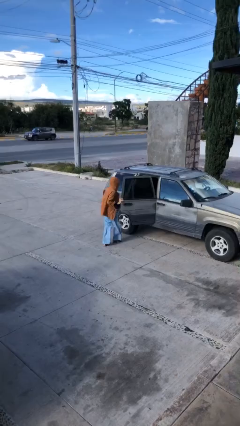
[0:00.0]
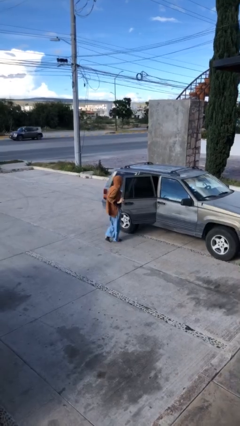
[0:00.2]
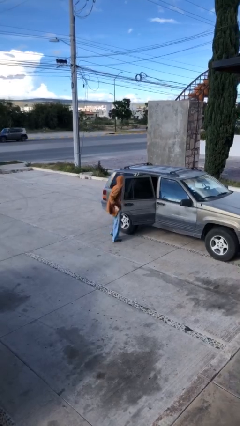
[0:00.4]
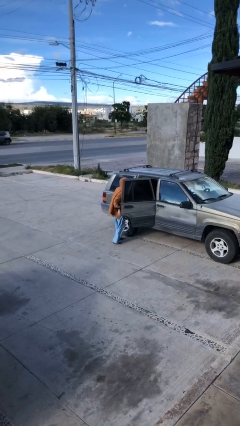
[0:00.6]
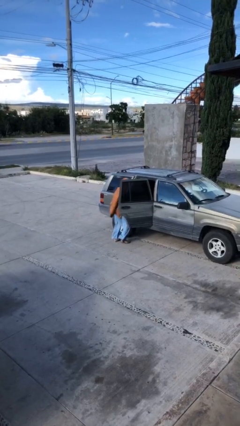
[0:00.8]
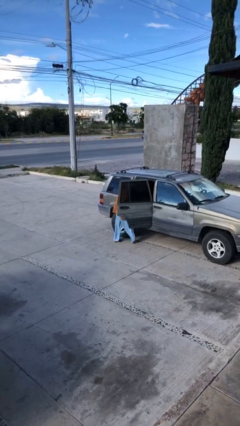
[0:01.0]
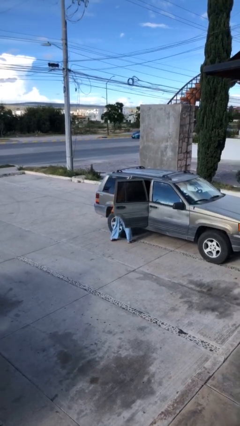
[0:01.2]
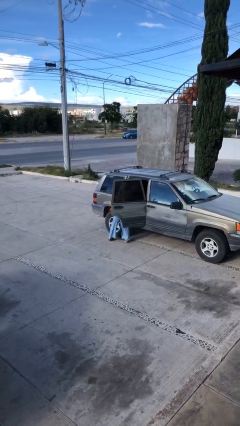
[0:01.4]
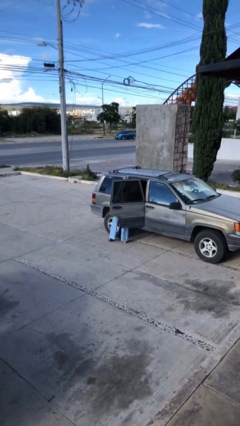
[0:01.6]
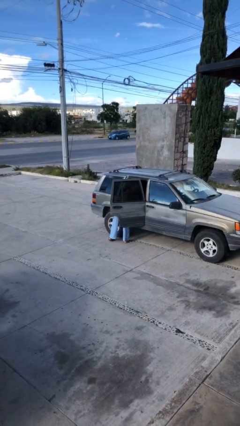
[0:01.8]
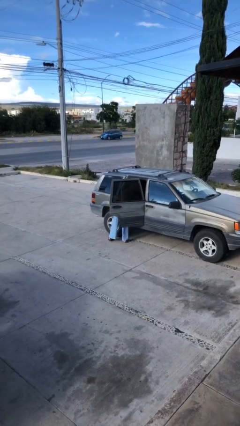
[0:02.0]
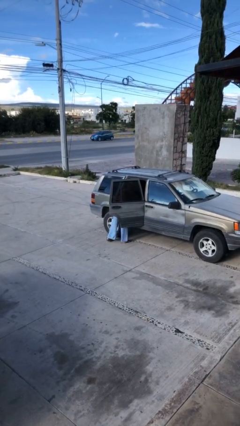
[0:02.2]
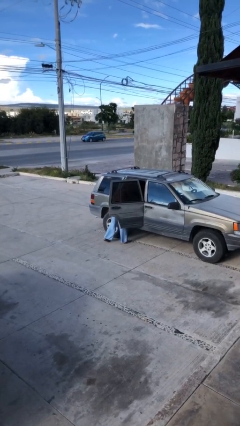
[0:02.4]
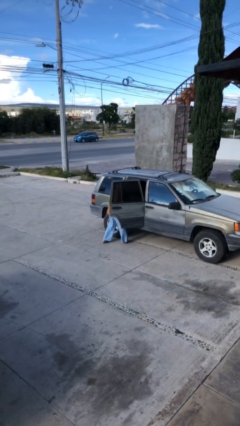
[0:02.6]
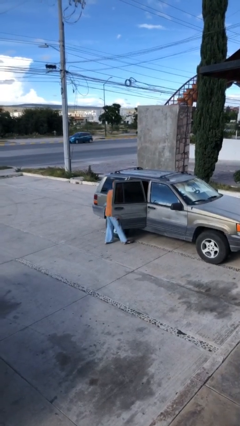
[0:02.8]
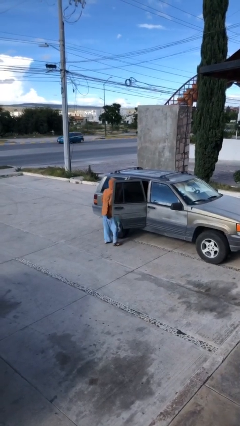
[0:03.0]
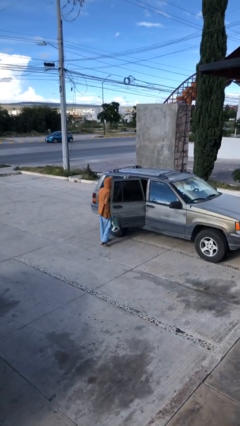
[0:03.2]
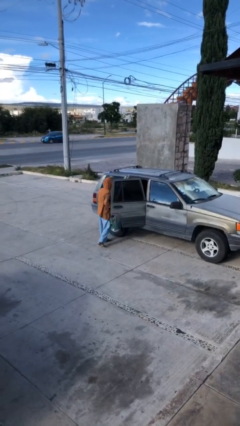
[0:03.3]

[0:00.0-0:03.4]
person unloads car

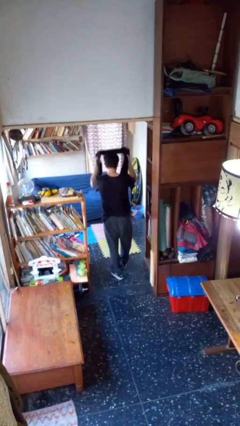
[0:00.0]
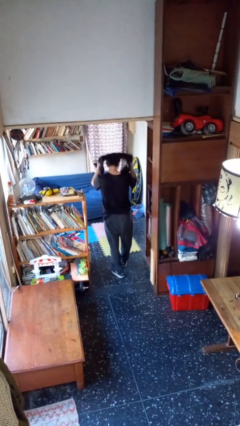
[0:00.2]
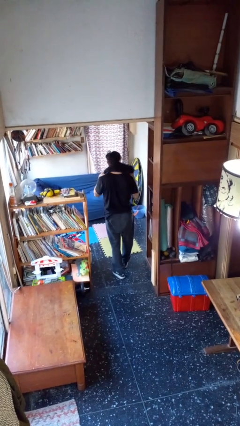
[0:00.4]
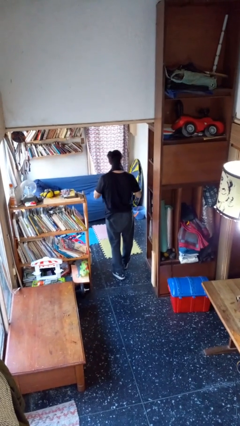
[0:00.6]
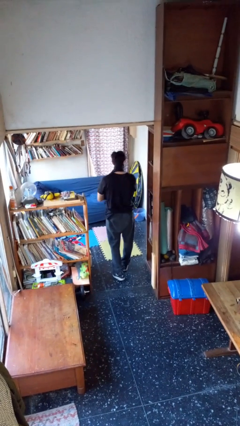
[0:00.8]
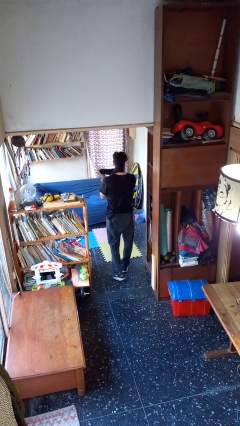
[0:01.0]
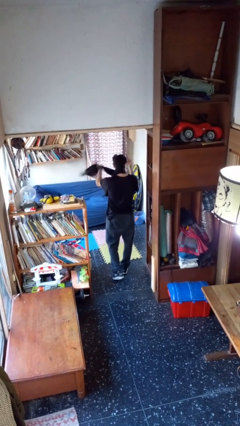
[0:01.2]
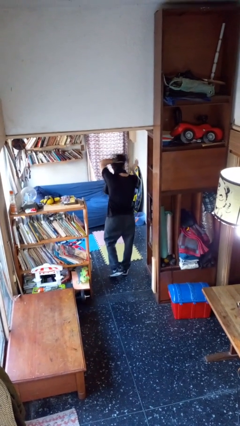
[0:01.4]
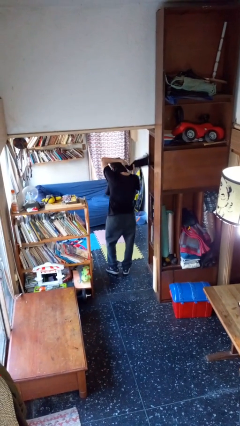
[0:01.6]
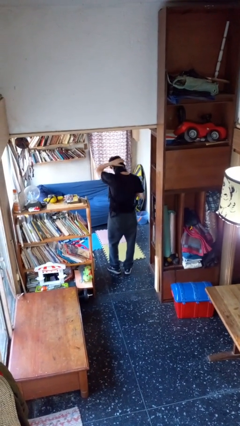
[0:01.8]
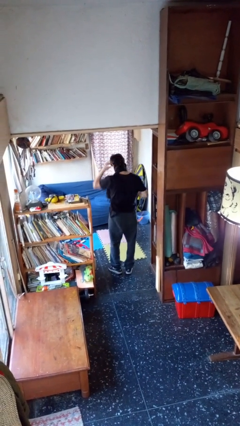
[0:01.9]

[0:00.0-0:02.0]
person puts on scarf

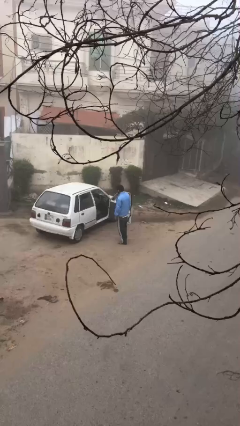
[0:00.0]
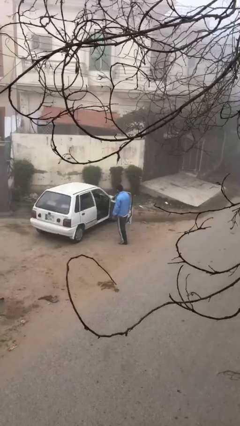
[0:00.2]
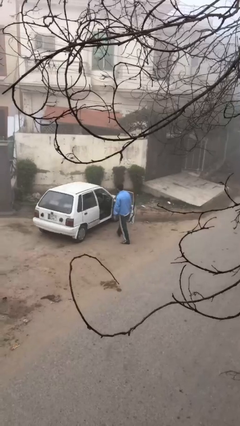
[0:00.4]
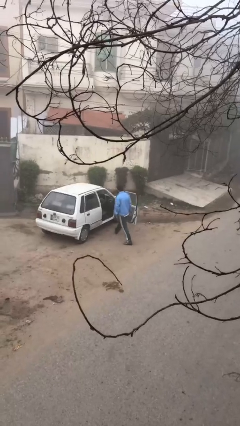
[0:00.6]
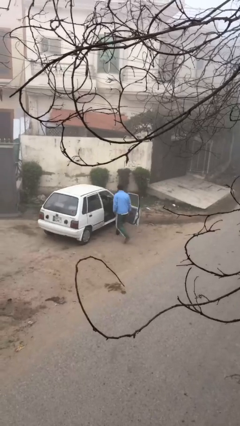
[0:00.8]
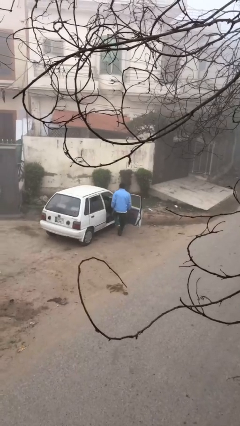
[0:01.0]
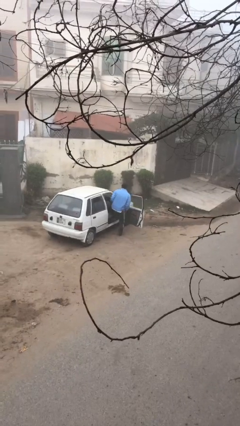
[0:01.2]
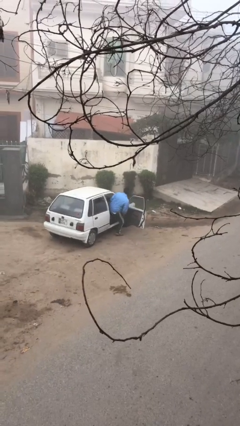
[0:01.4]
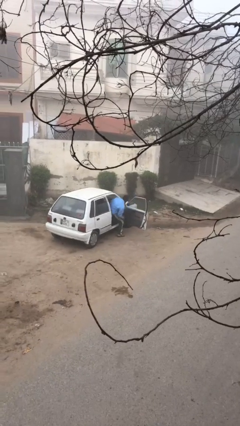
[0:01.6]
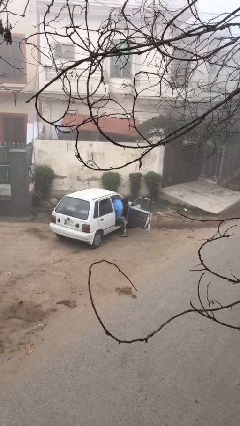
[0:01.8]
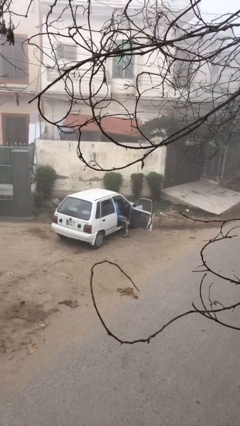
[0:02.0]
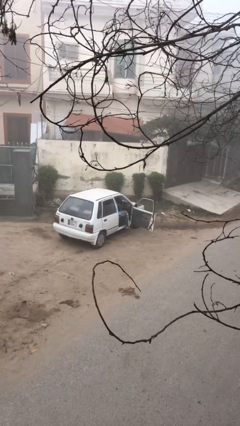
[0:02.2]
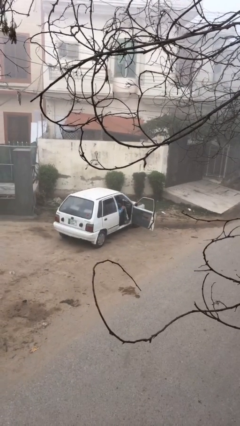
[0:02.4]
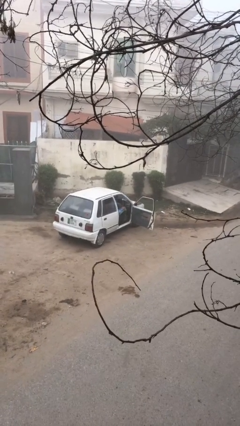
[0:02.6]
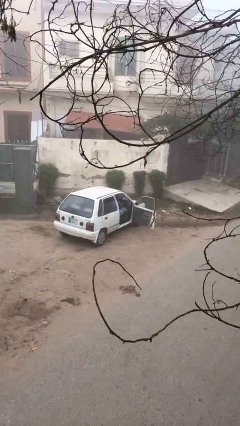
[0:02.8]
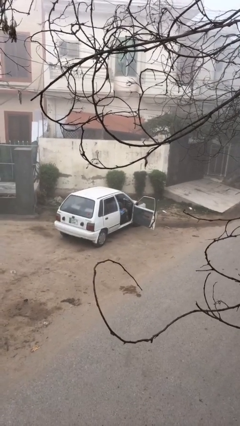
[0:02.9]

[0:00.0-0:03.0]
person enters car

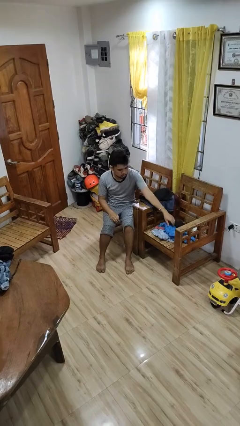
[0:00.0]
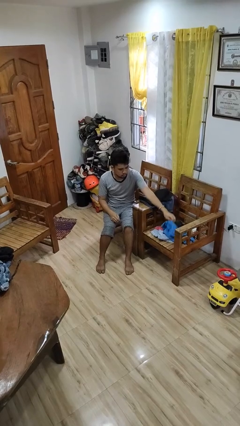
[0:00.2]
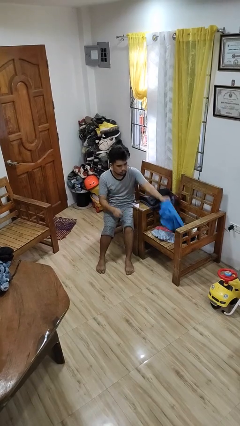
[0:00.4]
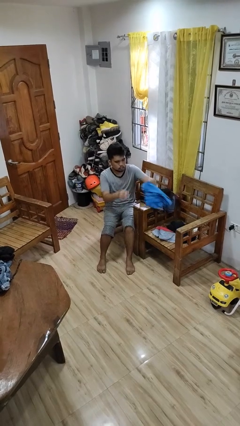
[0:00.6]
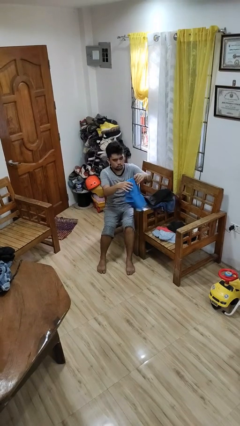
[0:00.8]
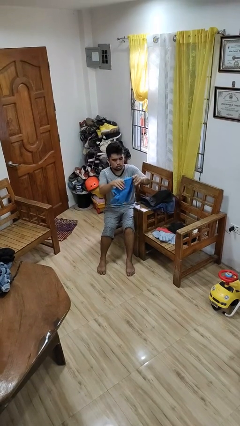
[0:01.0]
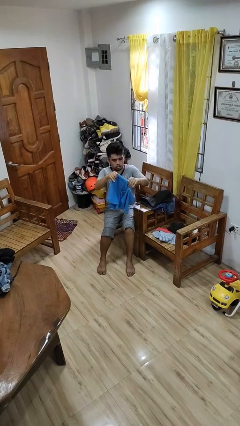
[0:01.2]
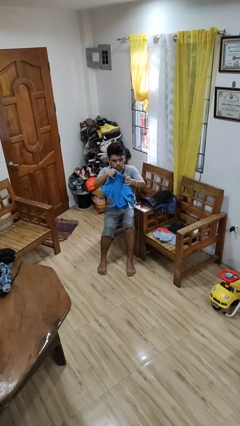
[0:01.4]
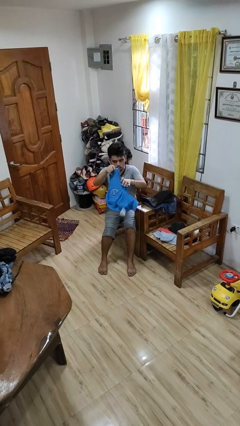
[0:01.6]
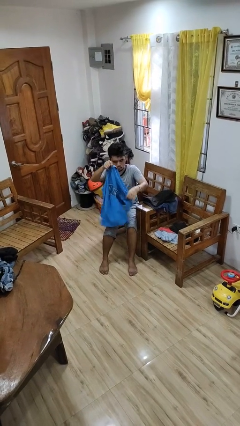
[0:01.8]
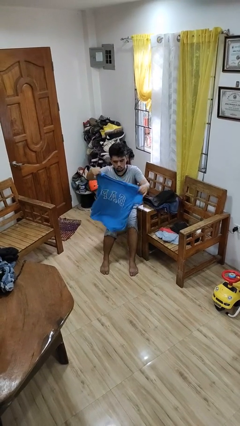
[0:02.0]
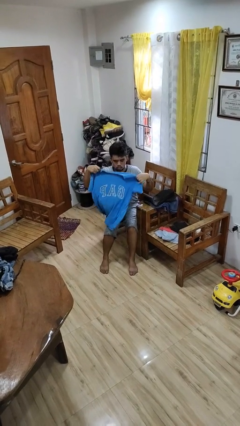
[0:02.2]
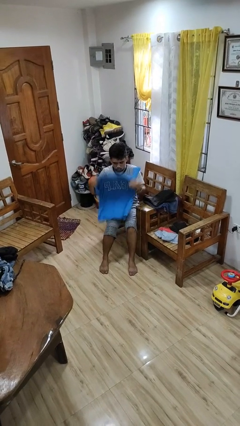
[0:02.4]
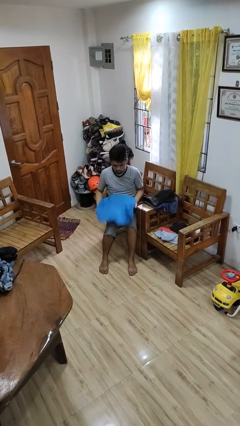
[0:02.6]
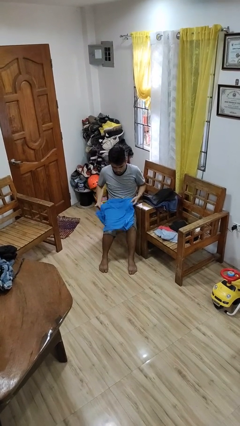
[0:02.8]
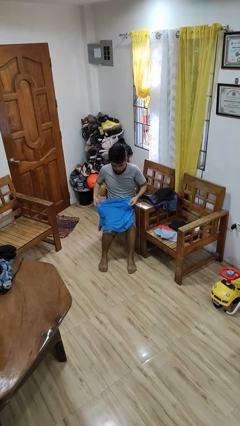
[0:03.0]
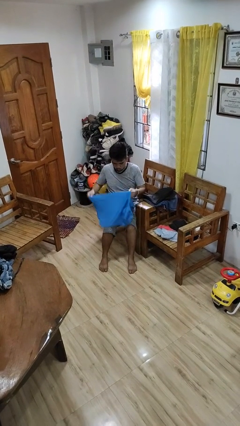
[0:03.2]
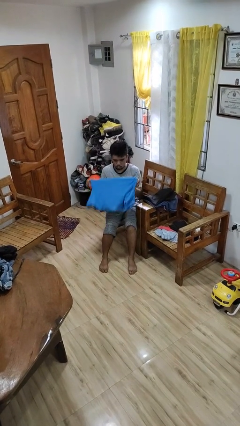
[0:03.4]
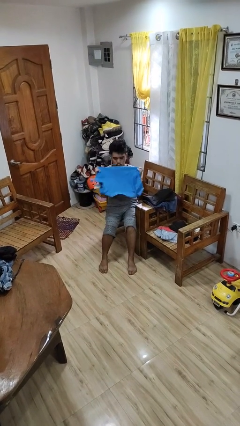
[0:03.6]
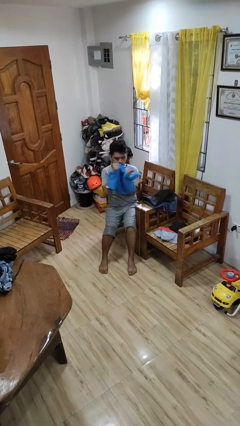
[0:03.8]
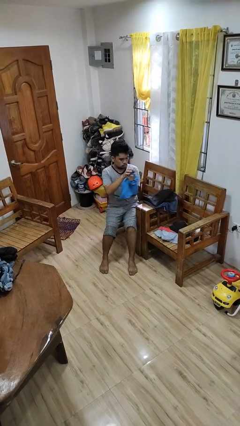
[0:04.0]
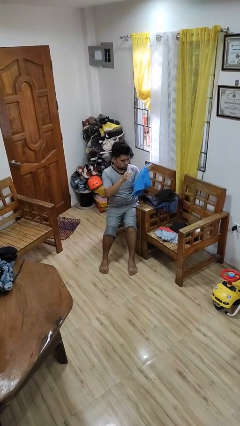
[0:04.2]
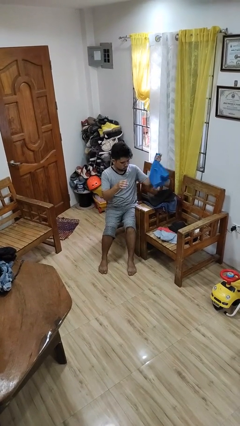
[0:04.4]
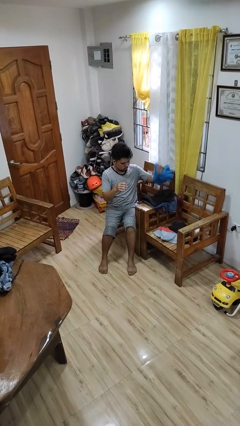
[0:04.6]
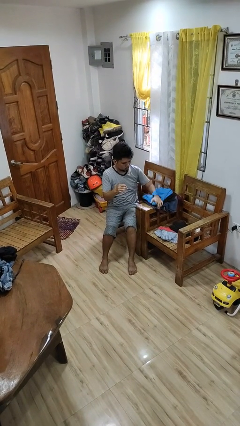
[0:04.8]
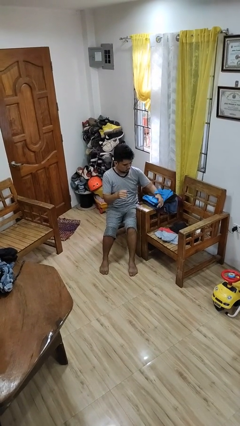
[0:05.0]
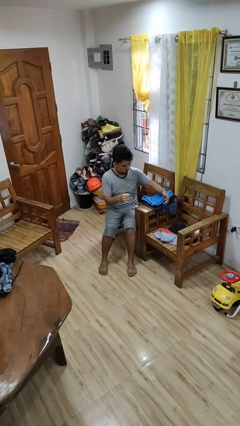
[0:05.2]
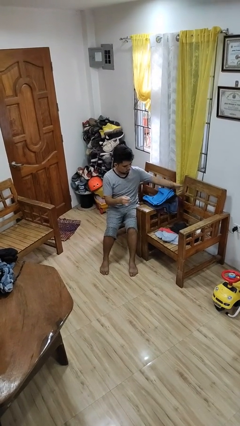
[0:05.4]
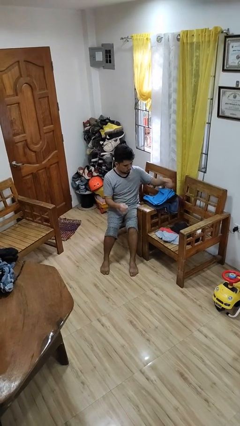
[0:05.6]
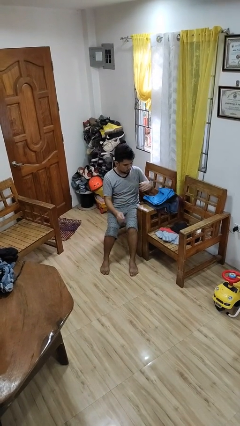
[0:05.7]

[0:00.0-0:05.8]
person folds shirt

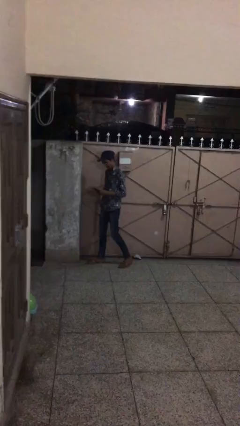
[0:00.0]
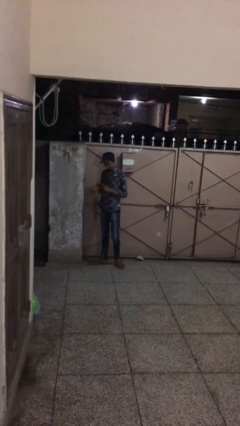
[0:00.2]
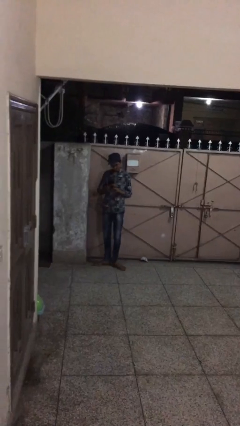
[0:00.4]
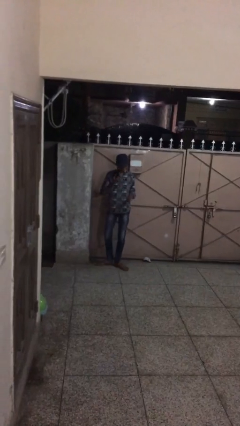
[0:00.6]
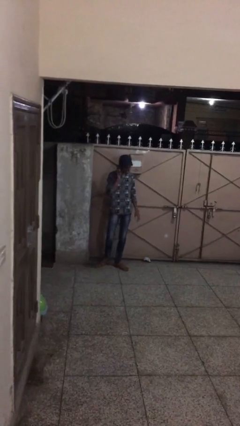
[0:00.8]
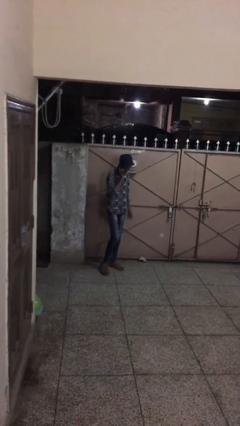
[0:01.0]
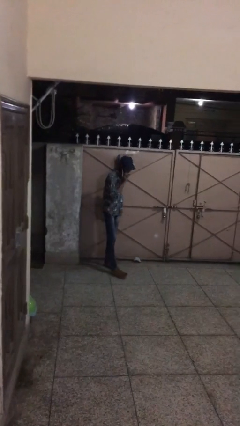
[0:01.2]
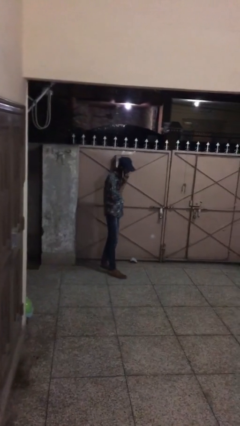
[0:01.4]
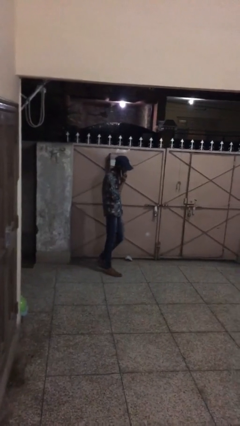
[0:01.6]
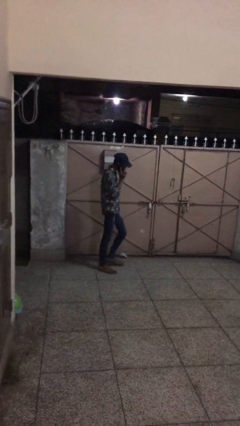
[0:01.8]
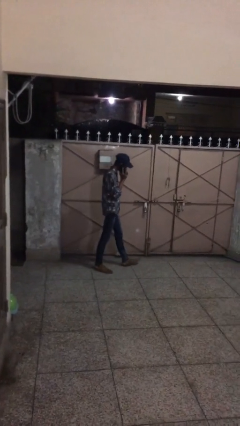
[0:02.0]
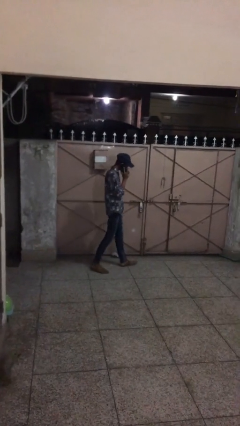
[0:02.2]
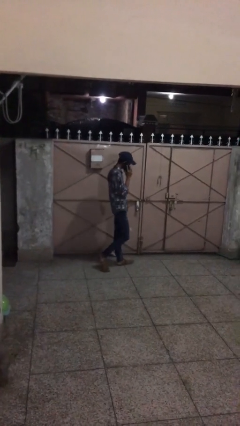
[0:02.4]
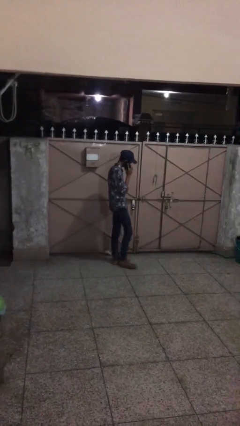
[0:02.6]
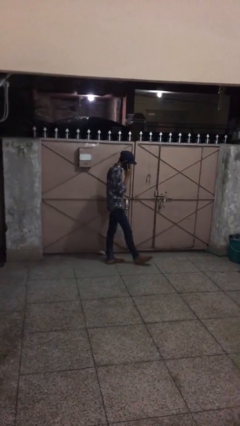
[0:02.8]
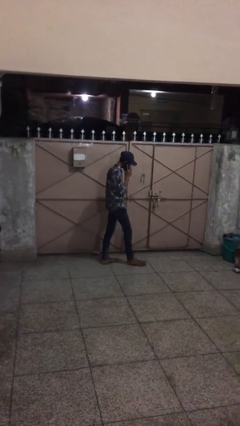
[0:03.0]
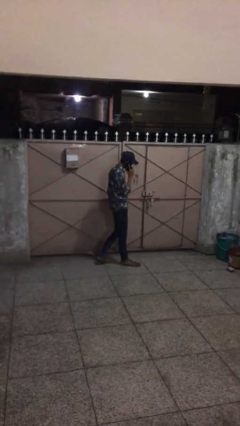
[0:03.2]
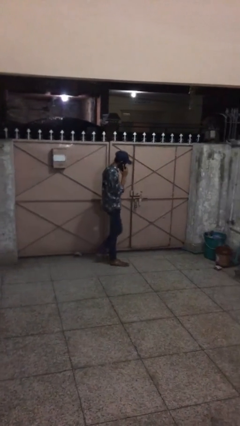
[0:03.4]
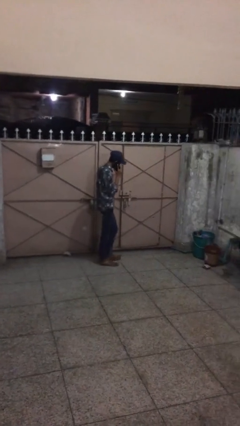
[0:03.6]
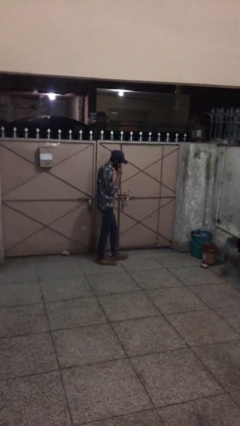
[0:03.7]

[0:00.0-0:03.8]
person talks on phone
